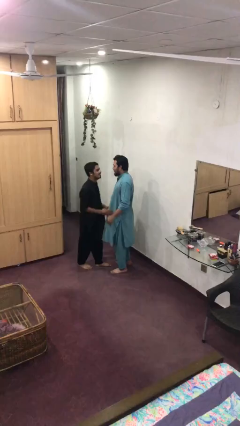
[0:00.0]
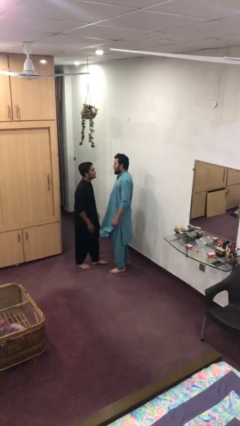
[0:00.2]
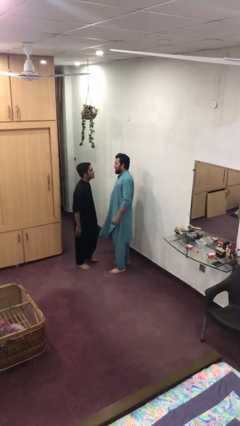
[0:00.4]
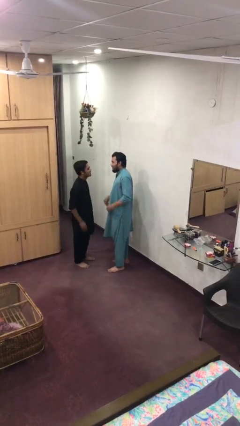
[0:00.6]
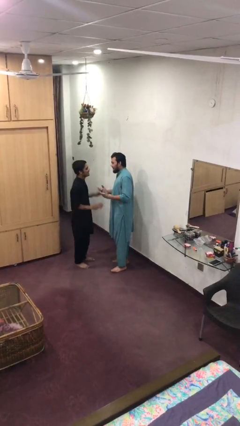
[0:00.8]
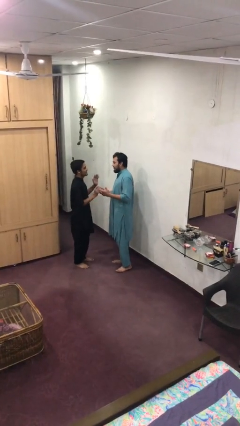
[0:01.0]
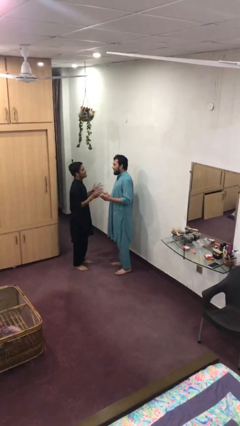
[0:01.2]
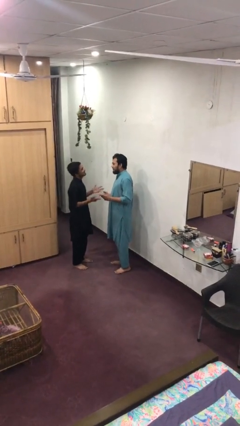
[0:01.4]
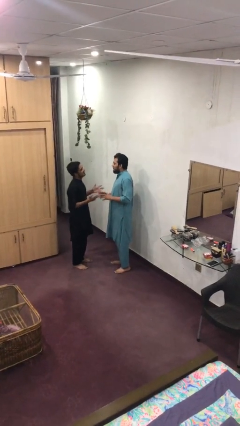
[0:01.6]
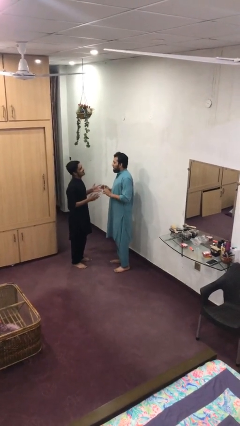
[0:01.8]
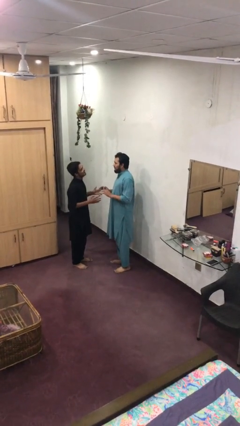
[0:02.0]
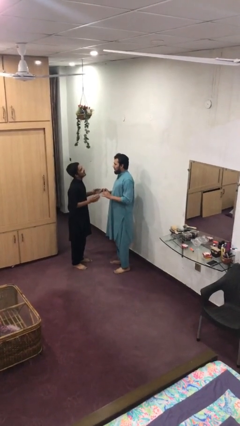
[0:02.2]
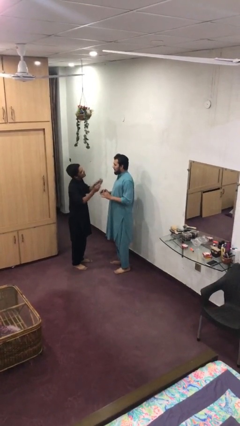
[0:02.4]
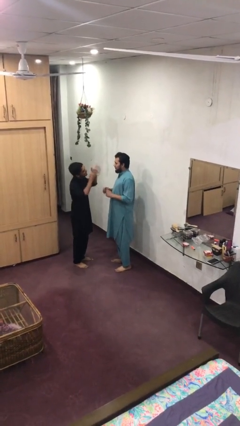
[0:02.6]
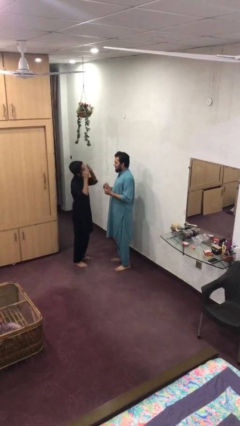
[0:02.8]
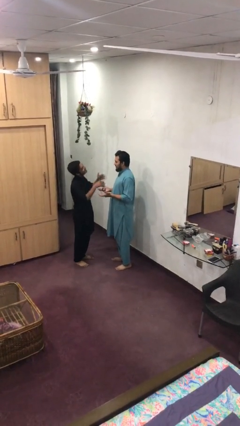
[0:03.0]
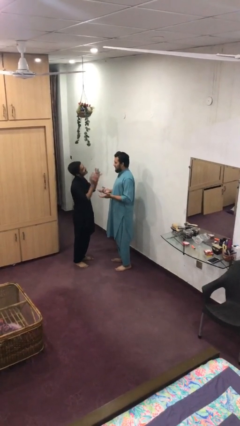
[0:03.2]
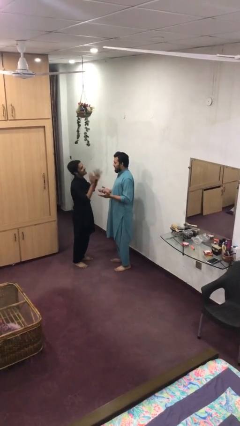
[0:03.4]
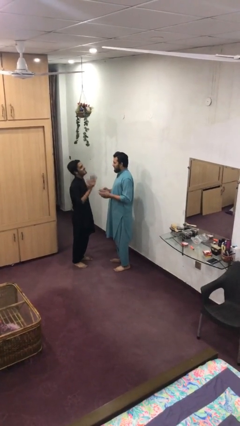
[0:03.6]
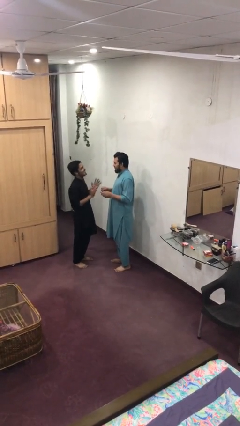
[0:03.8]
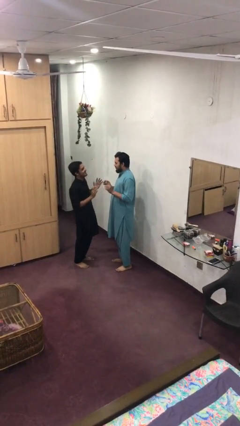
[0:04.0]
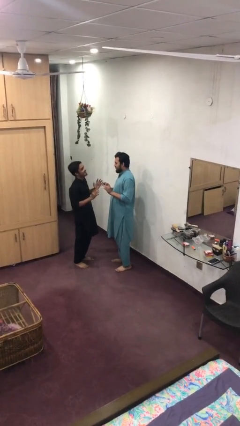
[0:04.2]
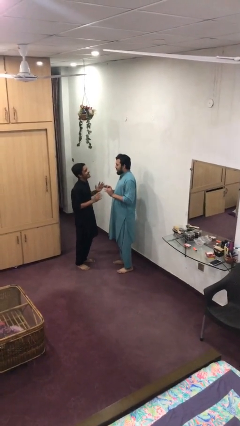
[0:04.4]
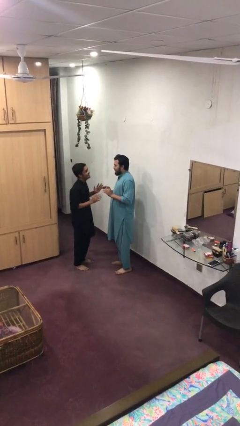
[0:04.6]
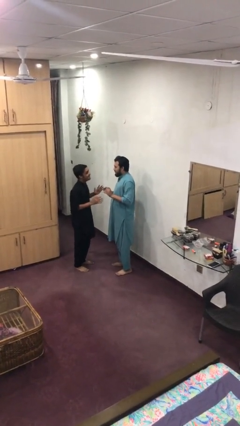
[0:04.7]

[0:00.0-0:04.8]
person talks to person

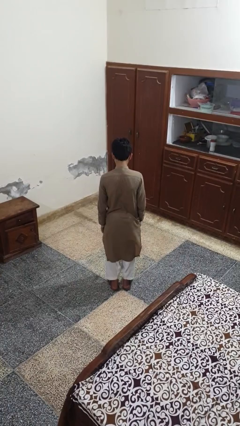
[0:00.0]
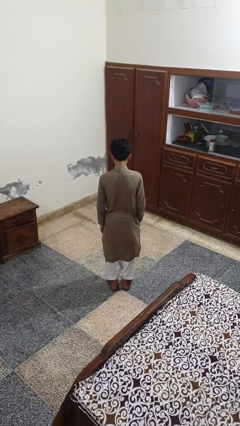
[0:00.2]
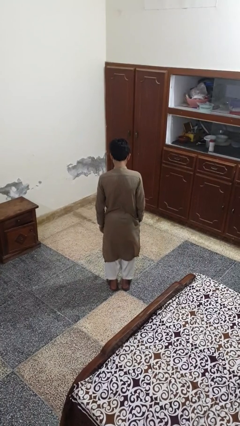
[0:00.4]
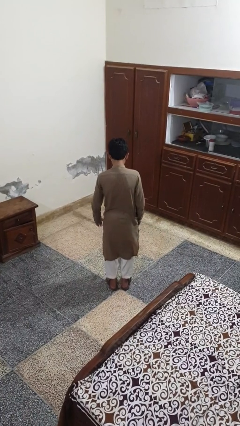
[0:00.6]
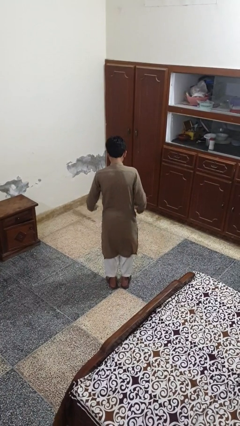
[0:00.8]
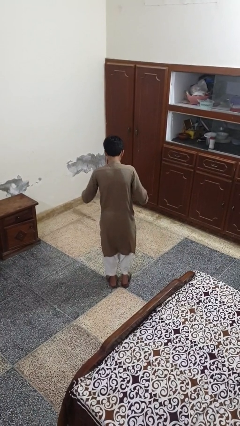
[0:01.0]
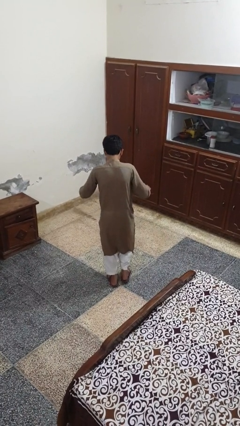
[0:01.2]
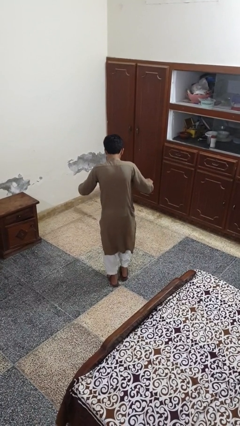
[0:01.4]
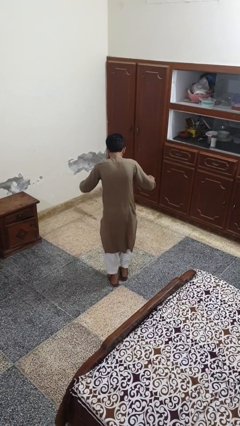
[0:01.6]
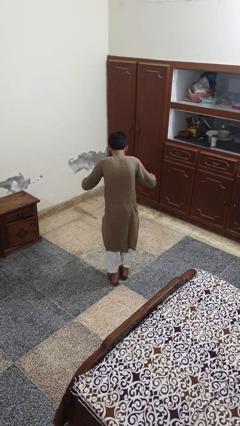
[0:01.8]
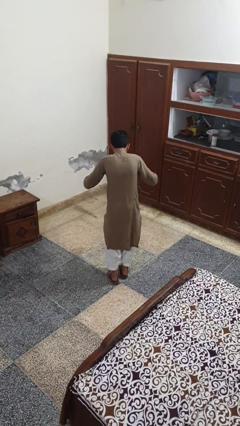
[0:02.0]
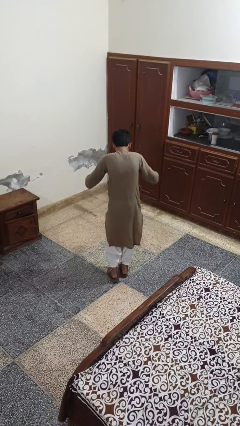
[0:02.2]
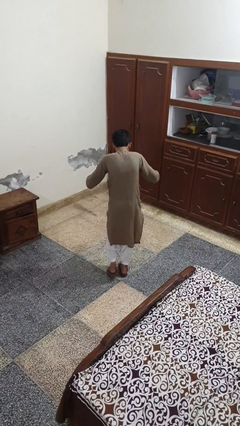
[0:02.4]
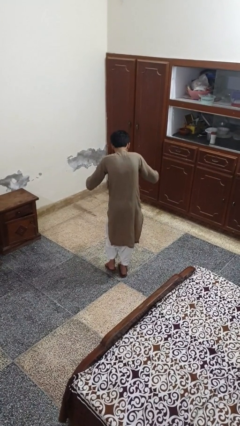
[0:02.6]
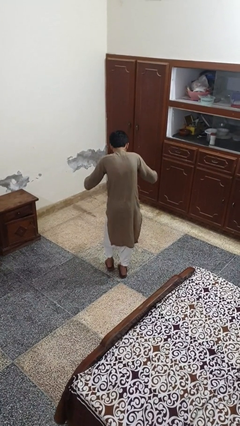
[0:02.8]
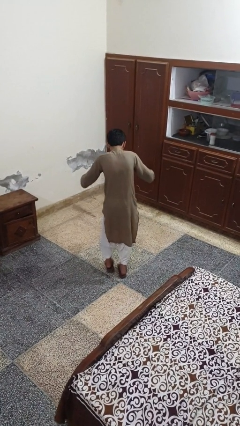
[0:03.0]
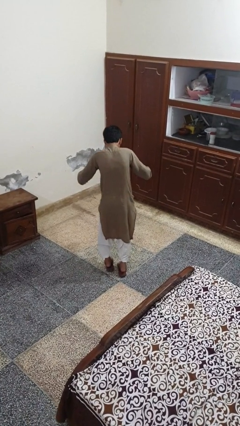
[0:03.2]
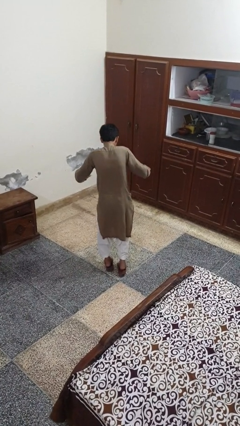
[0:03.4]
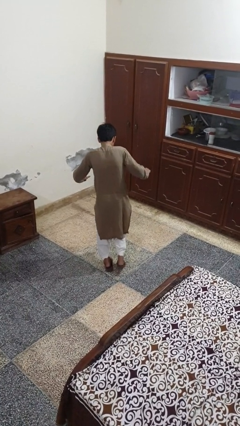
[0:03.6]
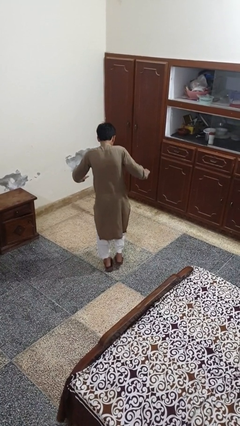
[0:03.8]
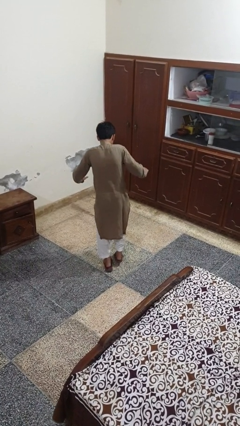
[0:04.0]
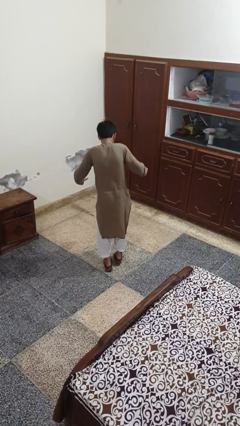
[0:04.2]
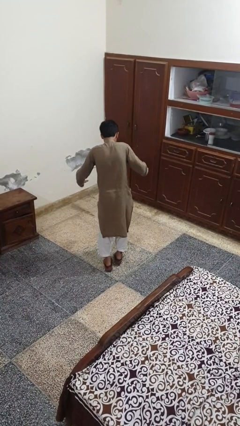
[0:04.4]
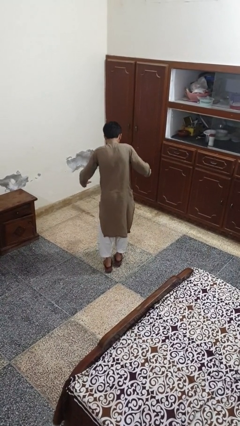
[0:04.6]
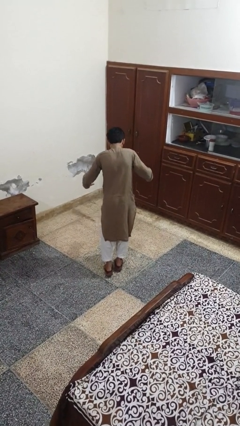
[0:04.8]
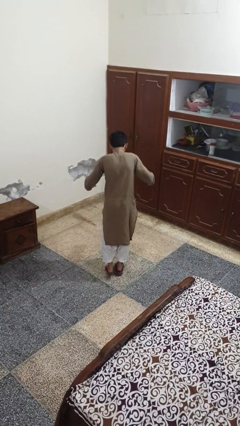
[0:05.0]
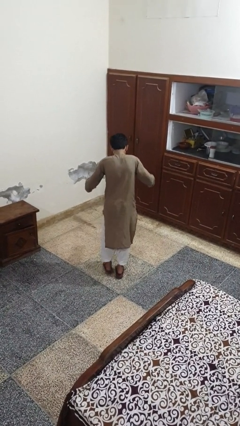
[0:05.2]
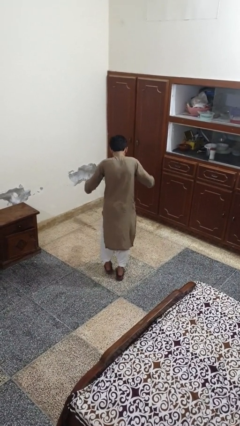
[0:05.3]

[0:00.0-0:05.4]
person walks tiptoe

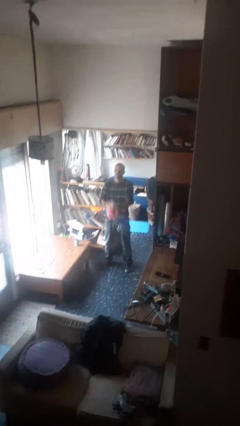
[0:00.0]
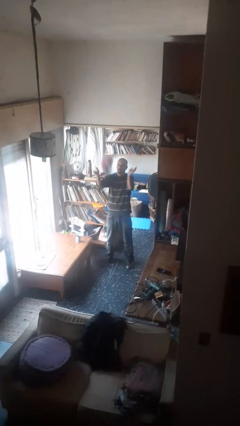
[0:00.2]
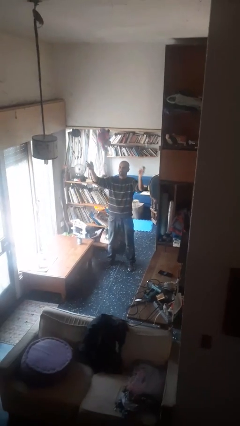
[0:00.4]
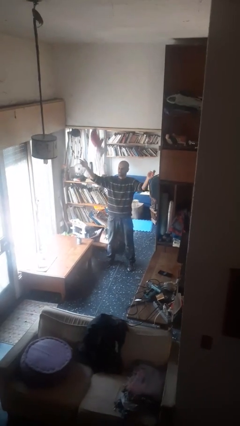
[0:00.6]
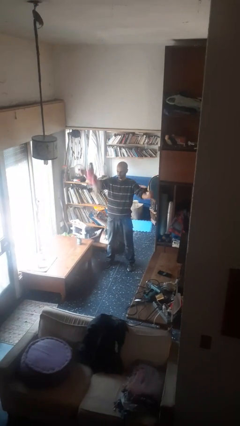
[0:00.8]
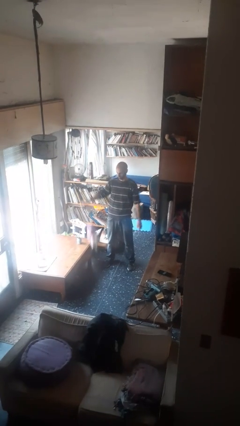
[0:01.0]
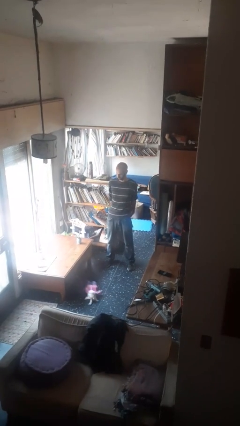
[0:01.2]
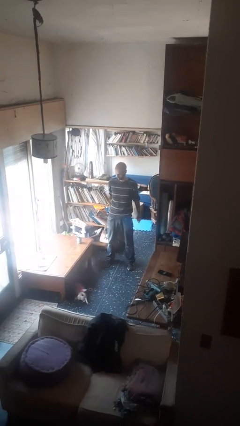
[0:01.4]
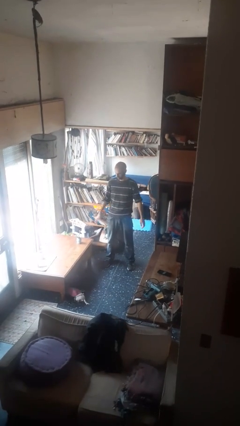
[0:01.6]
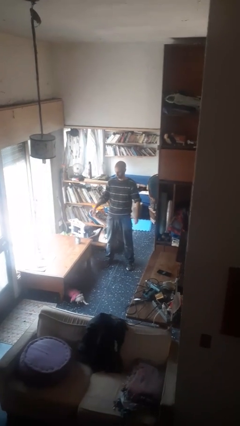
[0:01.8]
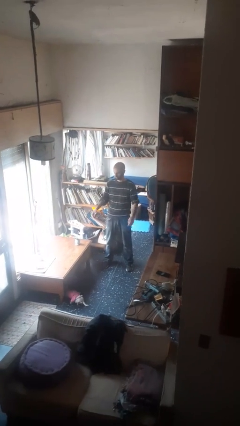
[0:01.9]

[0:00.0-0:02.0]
person throws object into air

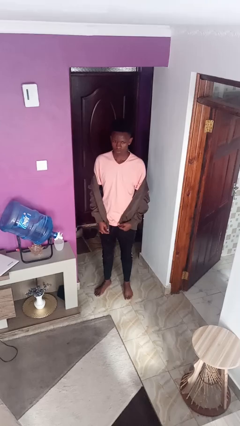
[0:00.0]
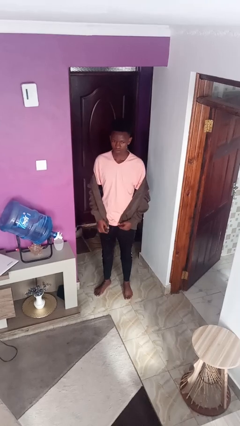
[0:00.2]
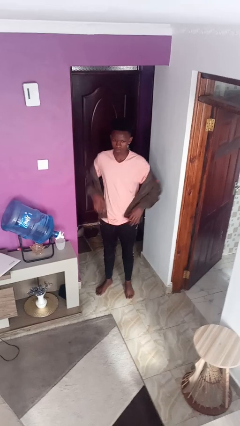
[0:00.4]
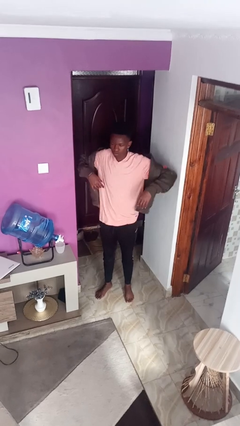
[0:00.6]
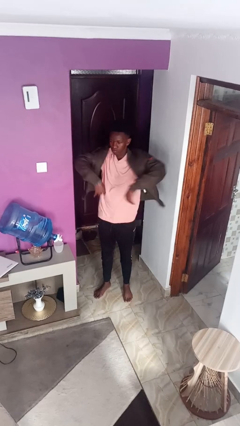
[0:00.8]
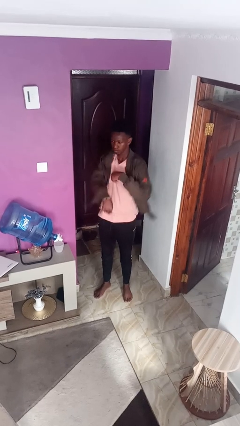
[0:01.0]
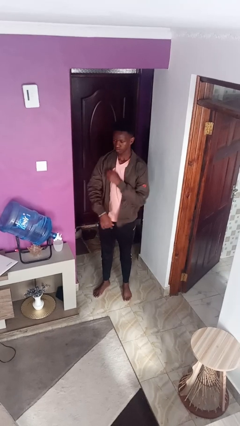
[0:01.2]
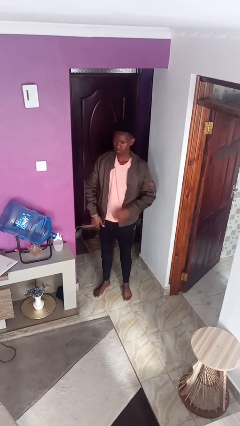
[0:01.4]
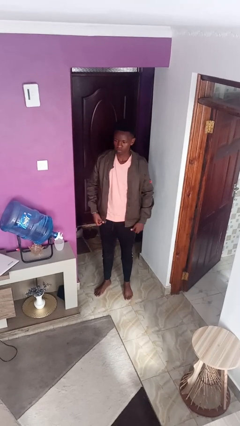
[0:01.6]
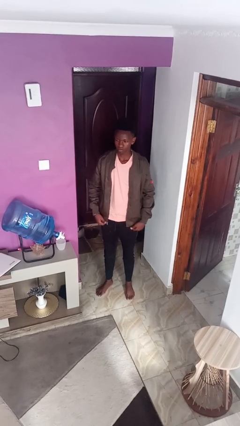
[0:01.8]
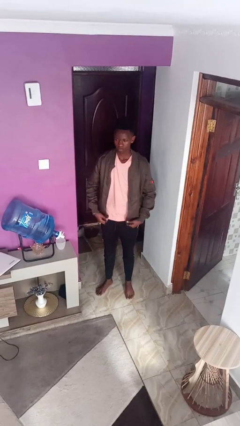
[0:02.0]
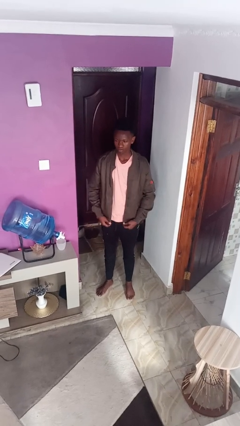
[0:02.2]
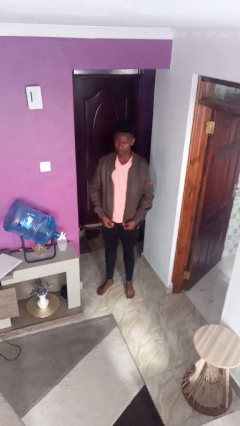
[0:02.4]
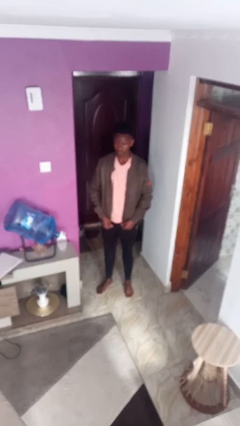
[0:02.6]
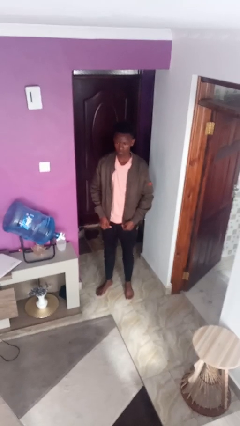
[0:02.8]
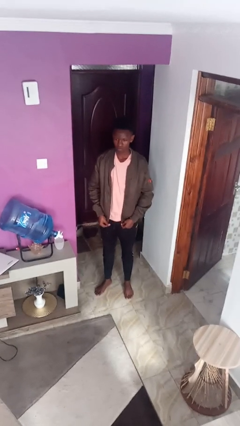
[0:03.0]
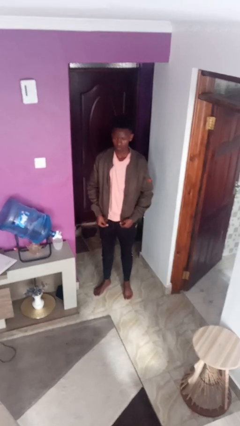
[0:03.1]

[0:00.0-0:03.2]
person puts on jacket

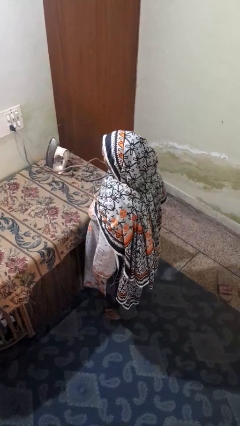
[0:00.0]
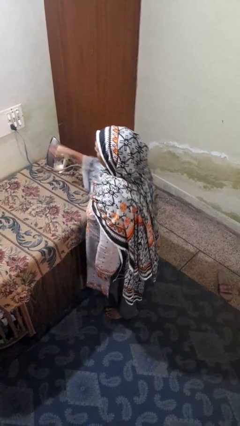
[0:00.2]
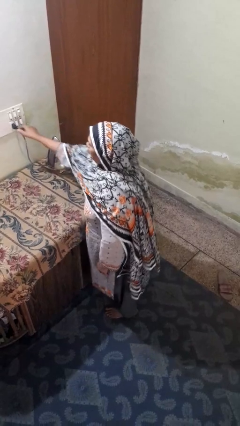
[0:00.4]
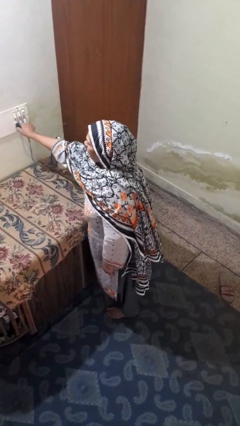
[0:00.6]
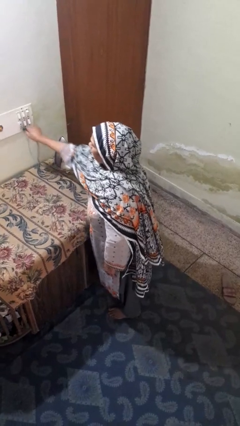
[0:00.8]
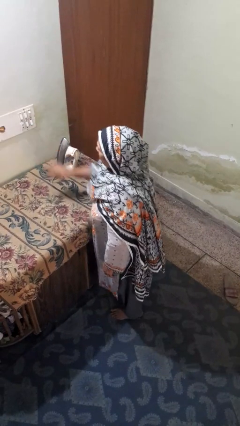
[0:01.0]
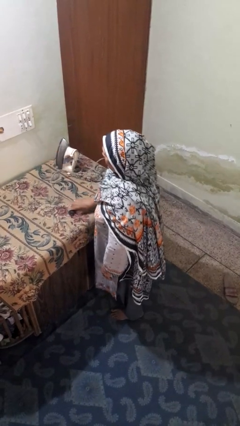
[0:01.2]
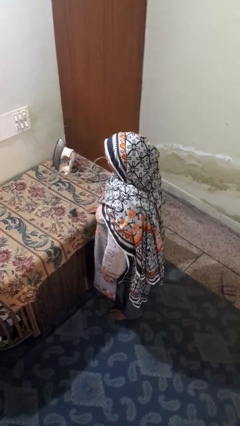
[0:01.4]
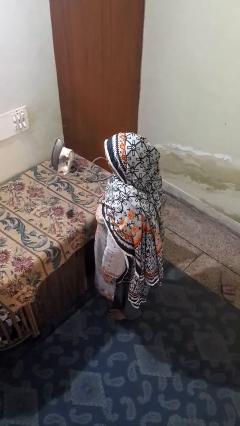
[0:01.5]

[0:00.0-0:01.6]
person unplugs from electrical socket
